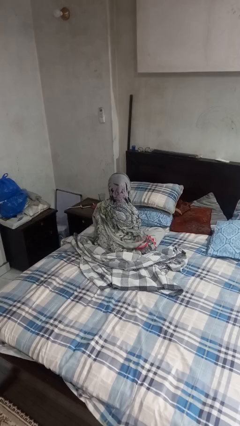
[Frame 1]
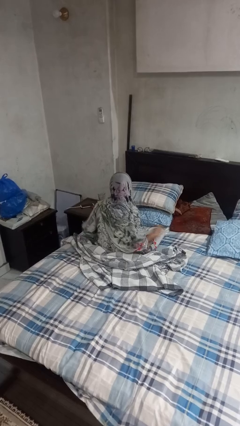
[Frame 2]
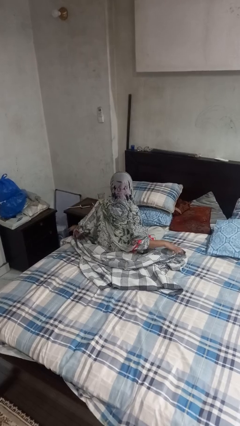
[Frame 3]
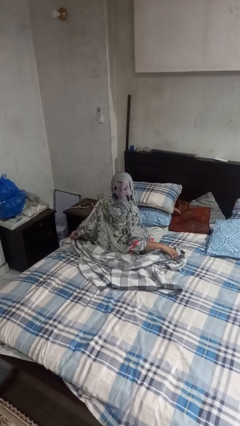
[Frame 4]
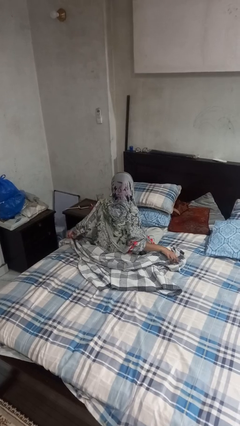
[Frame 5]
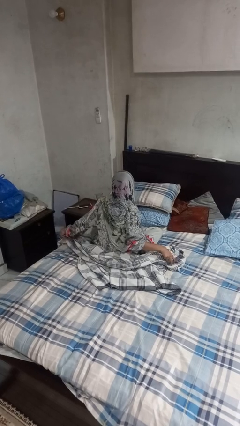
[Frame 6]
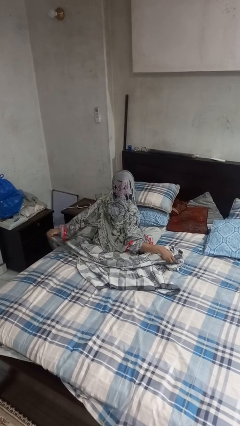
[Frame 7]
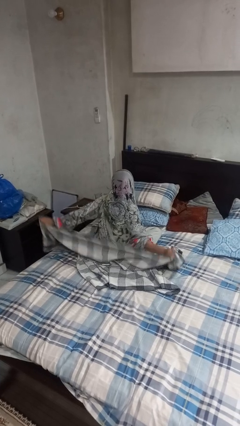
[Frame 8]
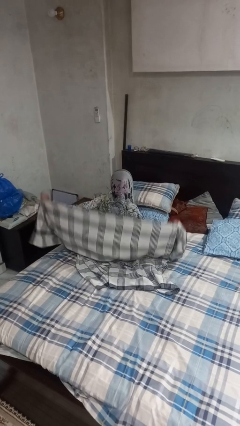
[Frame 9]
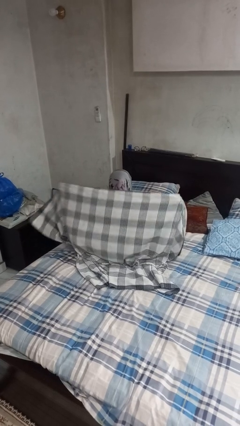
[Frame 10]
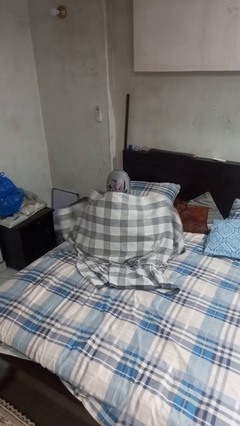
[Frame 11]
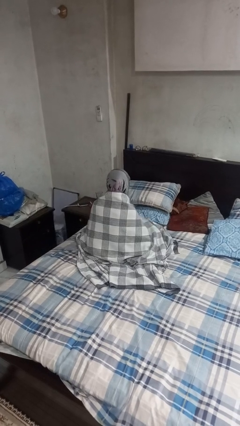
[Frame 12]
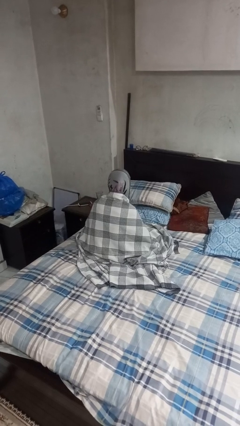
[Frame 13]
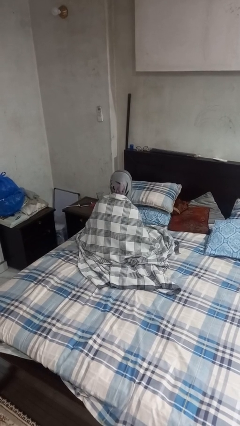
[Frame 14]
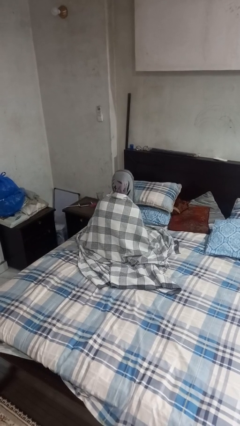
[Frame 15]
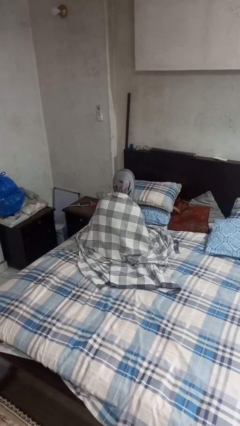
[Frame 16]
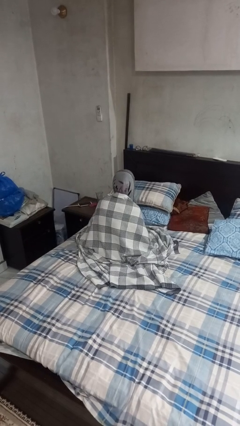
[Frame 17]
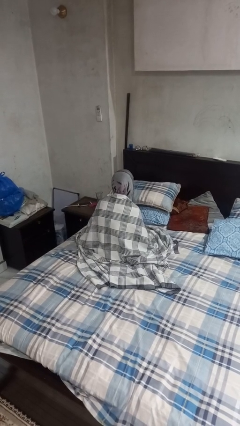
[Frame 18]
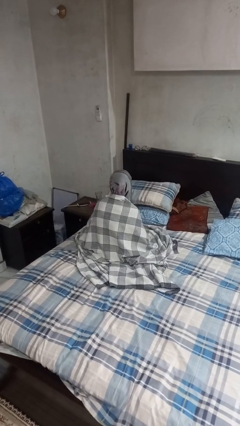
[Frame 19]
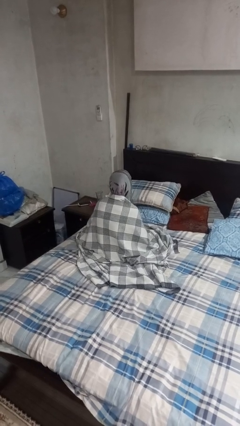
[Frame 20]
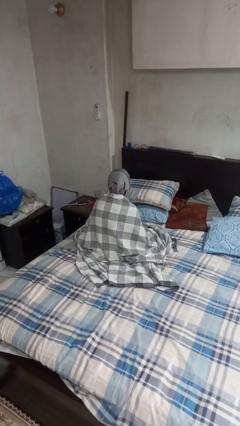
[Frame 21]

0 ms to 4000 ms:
person covers with blanket

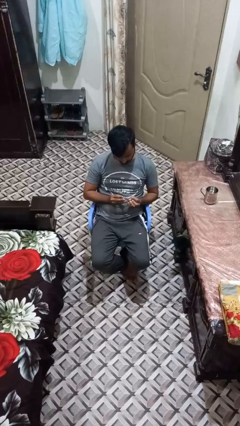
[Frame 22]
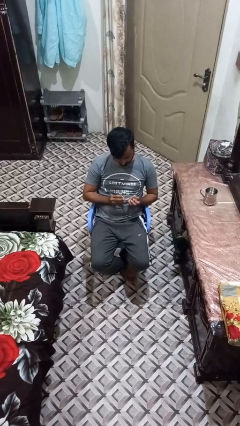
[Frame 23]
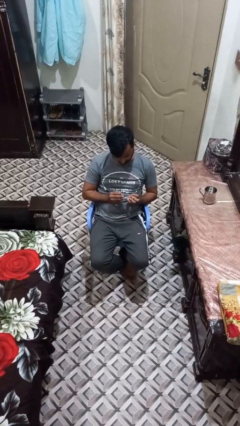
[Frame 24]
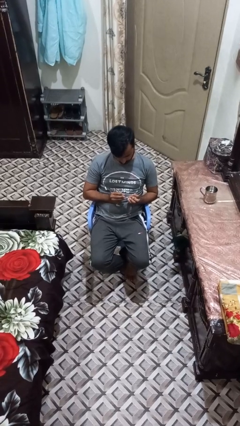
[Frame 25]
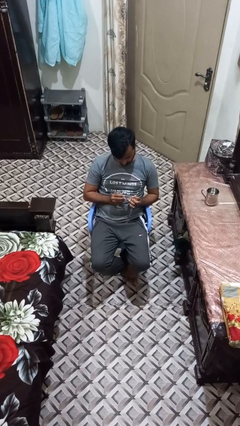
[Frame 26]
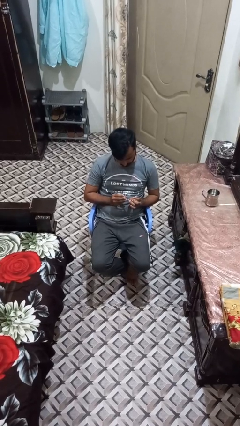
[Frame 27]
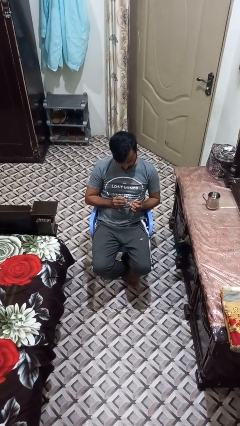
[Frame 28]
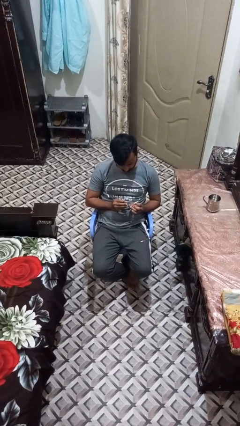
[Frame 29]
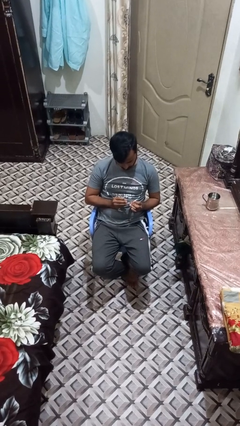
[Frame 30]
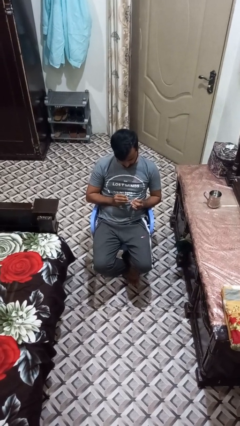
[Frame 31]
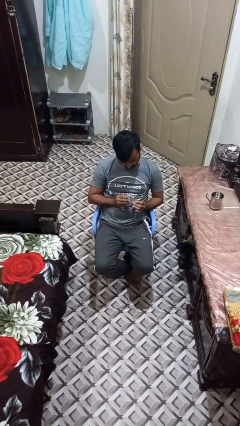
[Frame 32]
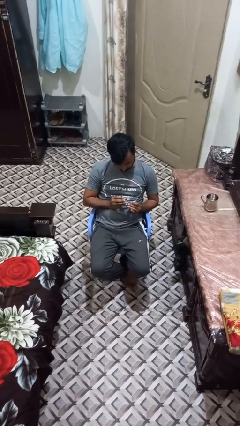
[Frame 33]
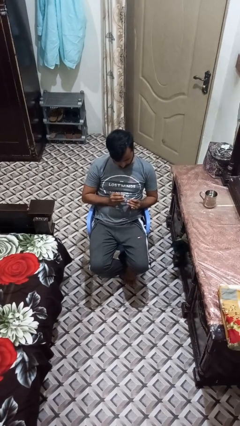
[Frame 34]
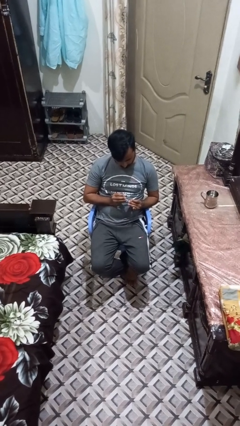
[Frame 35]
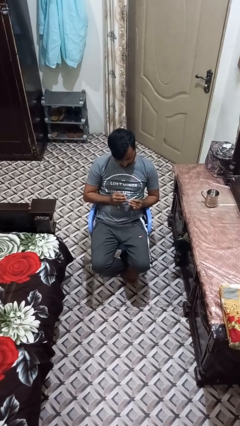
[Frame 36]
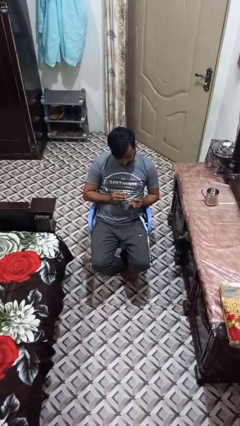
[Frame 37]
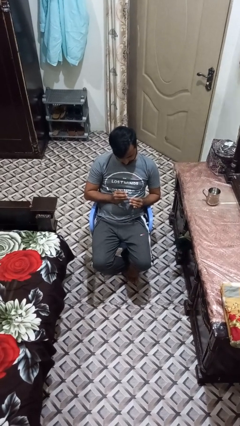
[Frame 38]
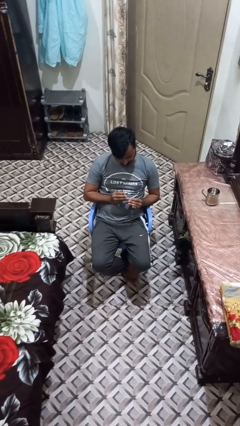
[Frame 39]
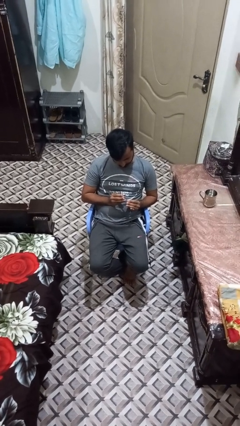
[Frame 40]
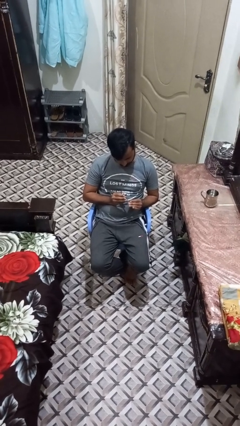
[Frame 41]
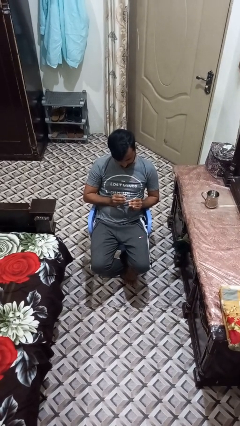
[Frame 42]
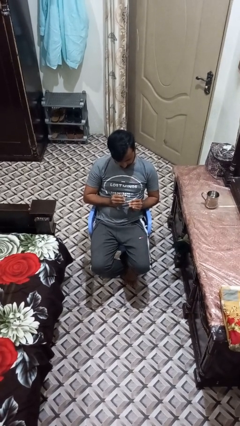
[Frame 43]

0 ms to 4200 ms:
person clips fingernails

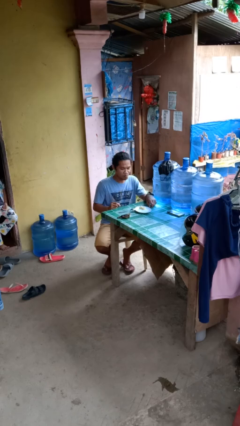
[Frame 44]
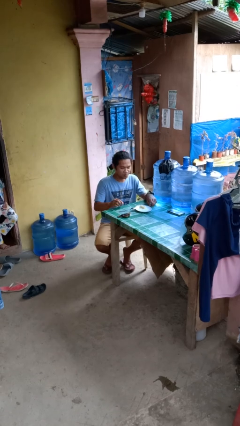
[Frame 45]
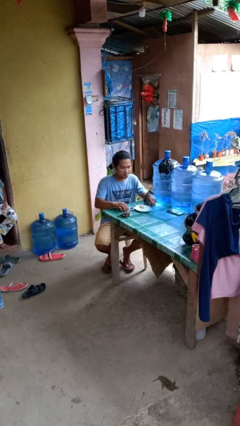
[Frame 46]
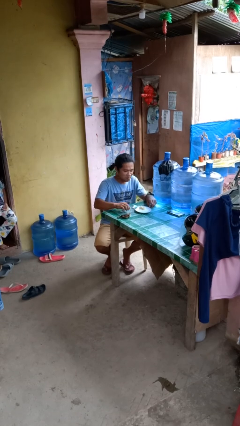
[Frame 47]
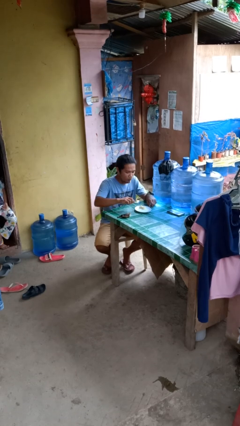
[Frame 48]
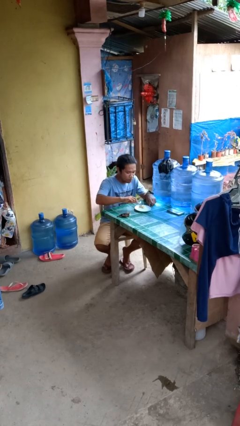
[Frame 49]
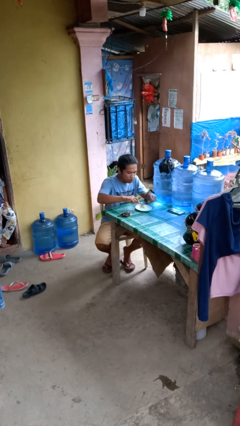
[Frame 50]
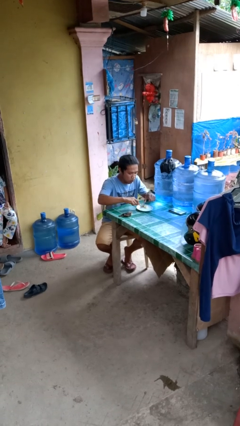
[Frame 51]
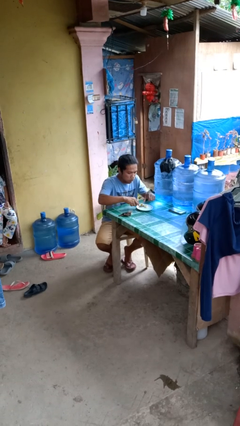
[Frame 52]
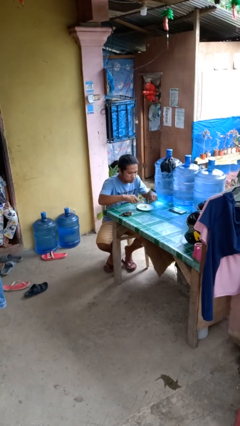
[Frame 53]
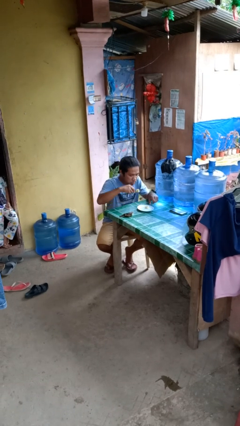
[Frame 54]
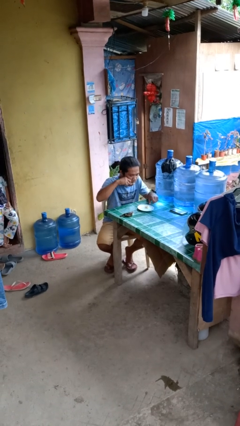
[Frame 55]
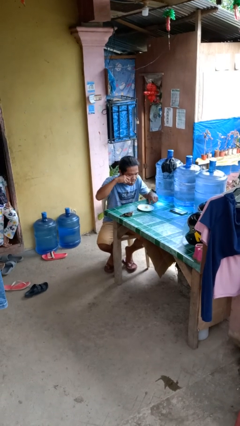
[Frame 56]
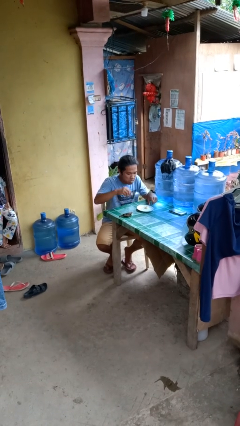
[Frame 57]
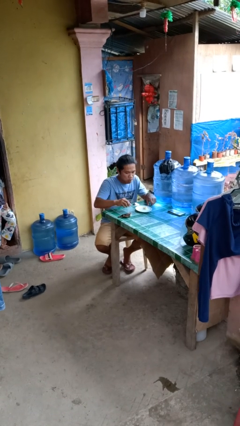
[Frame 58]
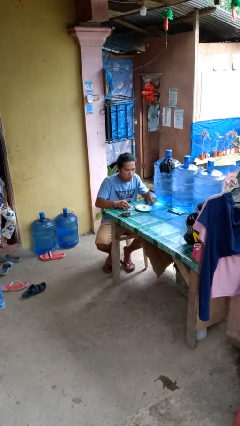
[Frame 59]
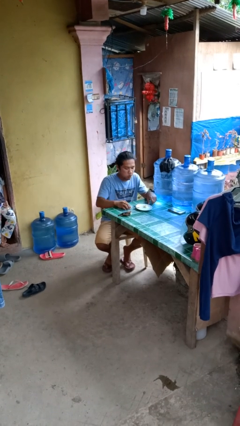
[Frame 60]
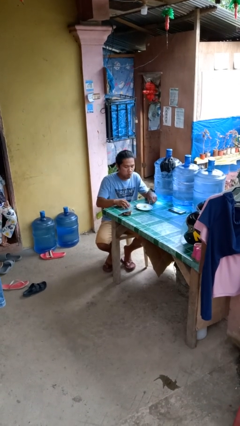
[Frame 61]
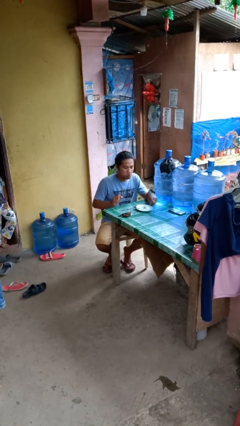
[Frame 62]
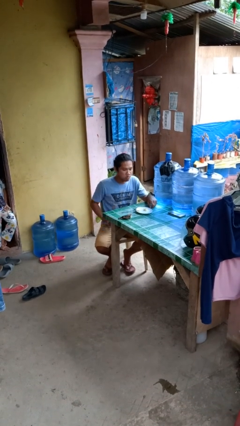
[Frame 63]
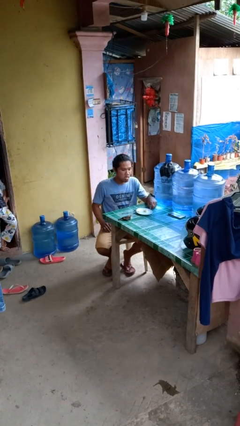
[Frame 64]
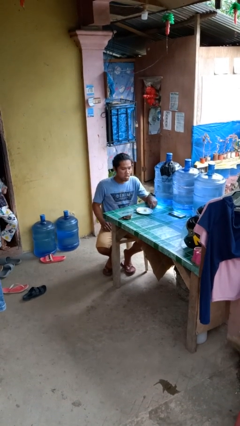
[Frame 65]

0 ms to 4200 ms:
person eats with utensil

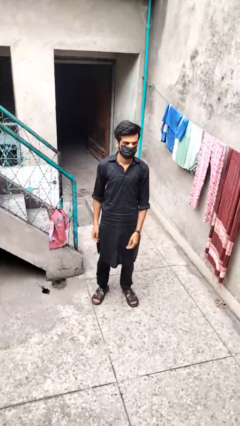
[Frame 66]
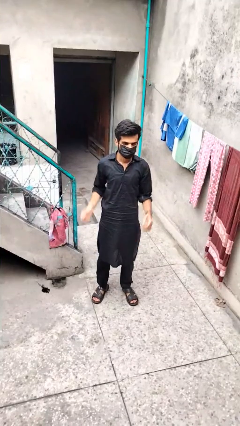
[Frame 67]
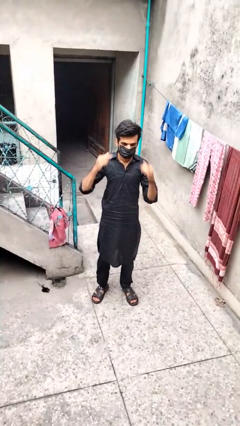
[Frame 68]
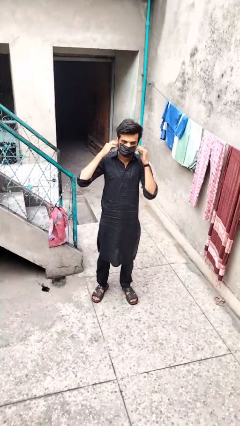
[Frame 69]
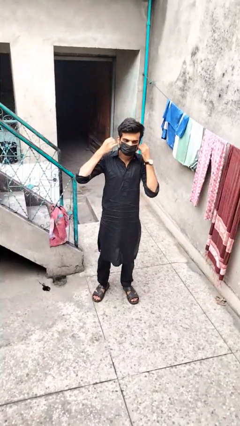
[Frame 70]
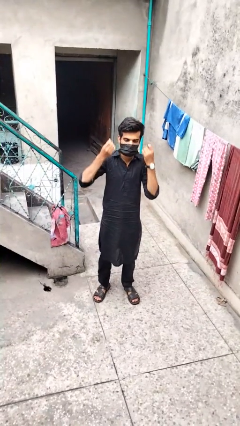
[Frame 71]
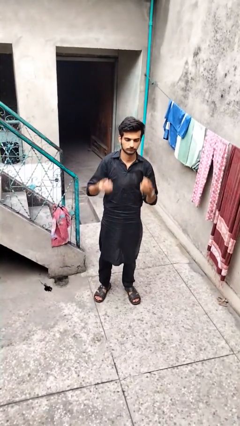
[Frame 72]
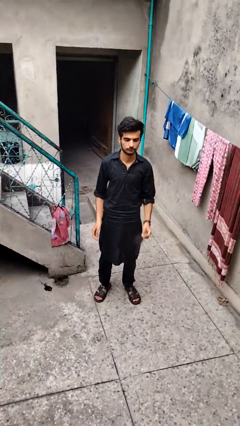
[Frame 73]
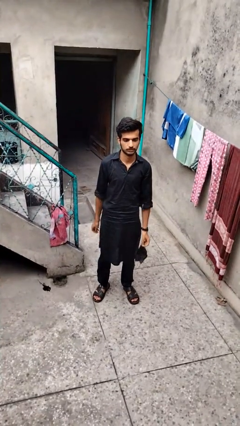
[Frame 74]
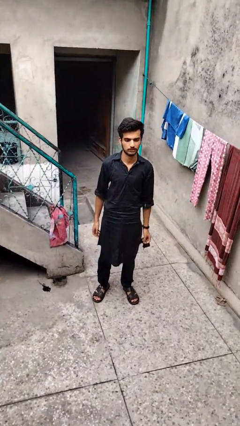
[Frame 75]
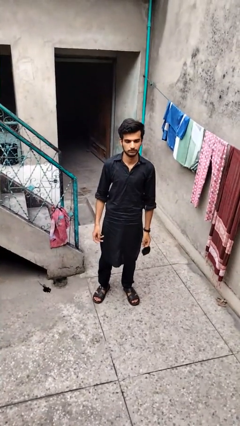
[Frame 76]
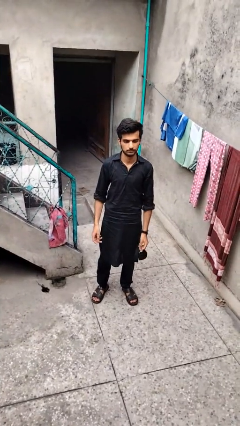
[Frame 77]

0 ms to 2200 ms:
person takes off facemask

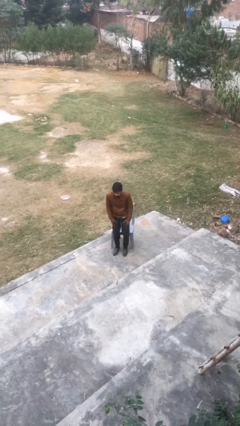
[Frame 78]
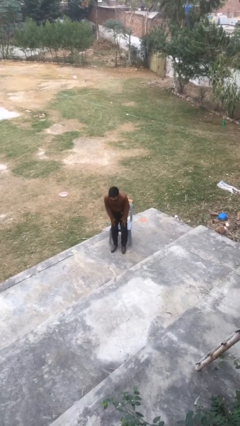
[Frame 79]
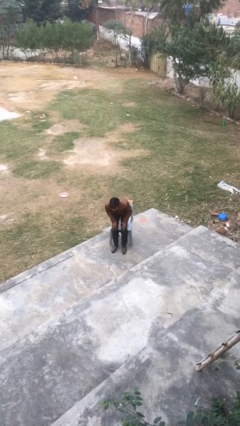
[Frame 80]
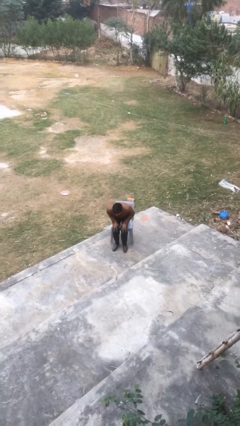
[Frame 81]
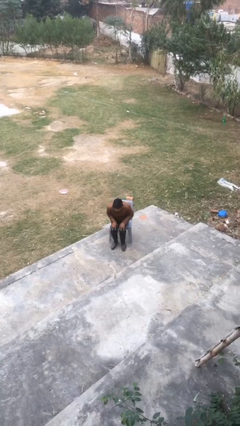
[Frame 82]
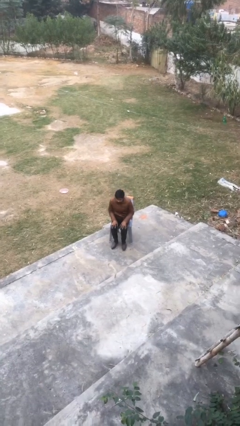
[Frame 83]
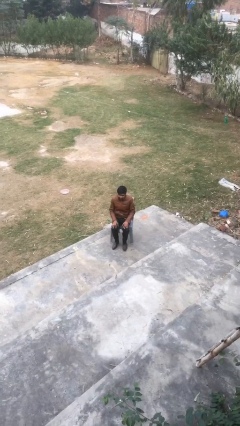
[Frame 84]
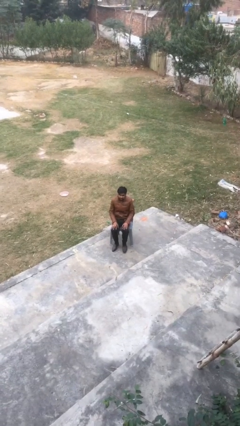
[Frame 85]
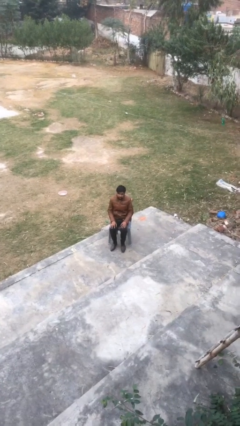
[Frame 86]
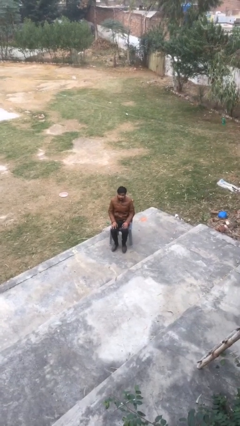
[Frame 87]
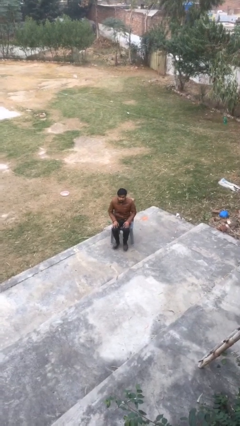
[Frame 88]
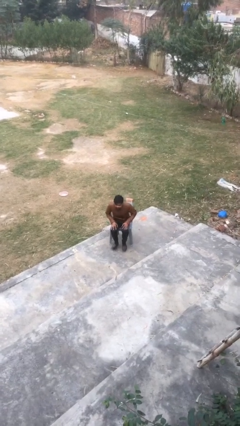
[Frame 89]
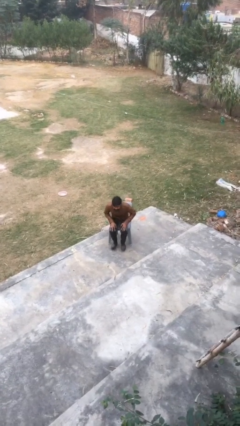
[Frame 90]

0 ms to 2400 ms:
person sits down

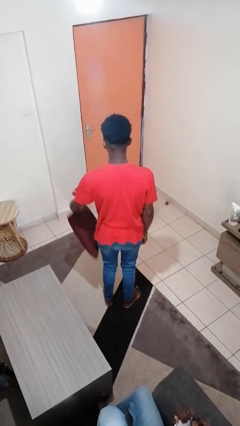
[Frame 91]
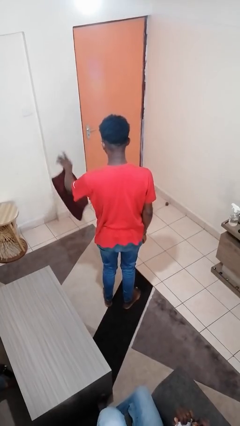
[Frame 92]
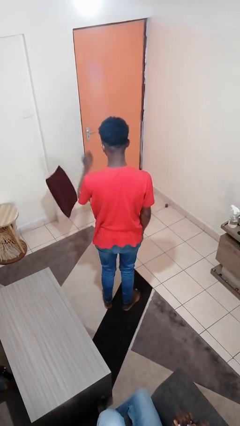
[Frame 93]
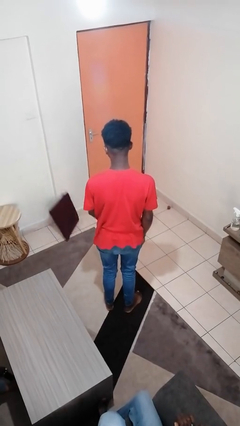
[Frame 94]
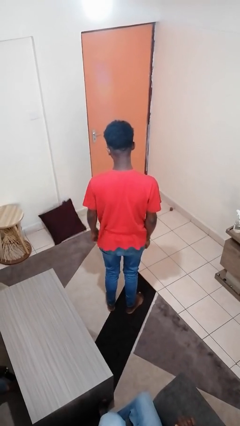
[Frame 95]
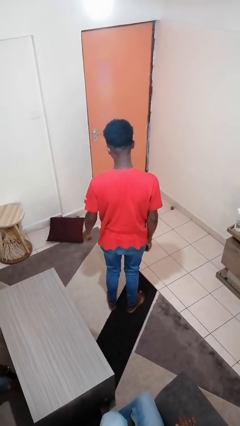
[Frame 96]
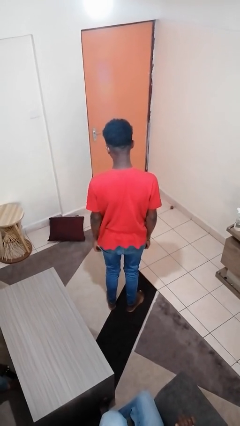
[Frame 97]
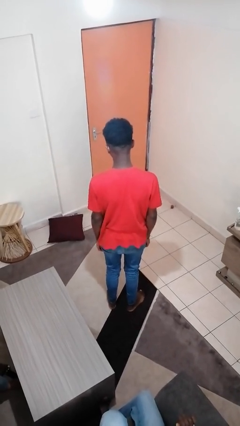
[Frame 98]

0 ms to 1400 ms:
person throws object to ground
